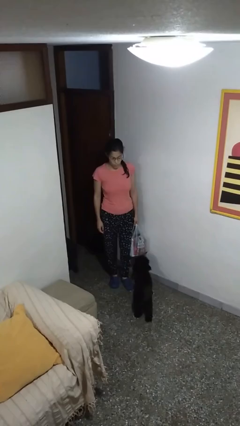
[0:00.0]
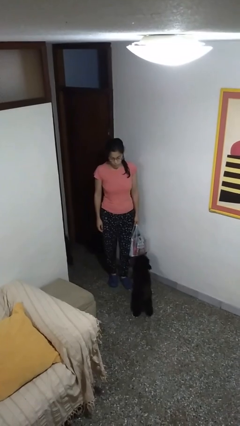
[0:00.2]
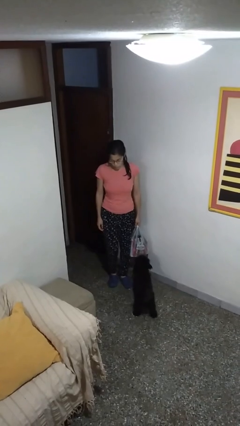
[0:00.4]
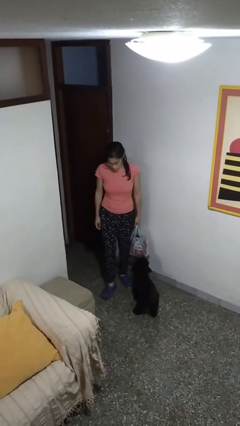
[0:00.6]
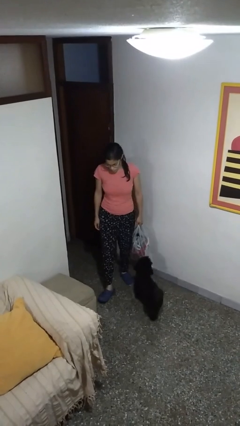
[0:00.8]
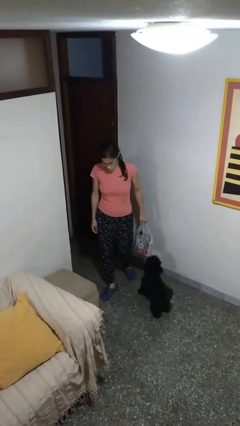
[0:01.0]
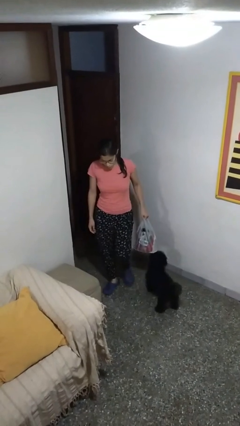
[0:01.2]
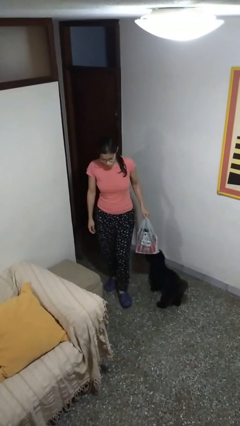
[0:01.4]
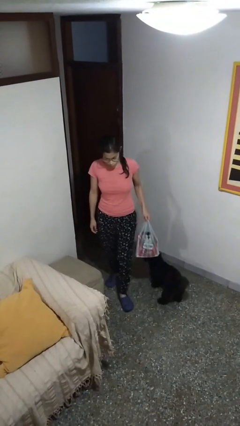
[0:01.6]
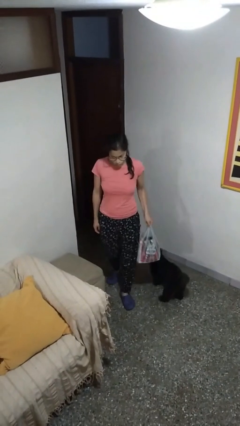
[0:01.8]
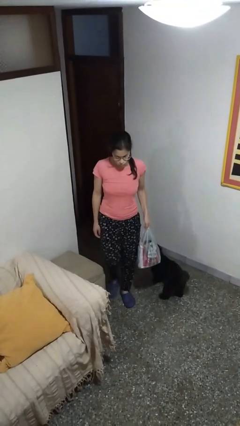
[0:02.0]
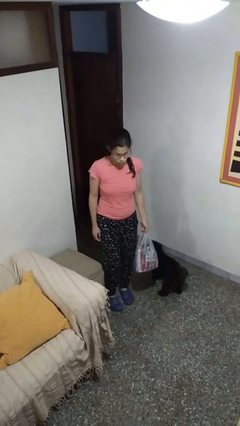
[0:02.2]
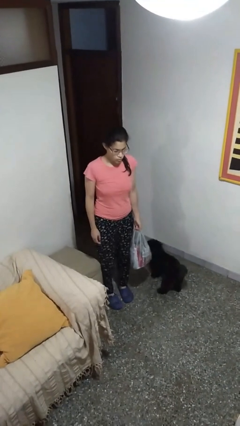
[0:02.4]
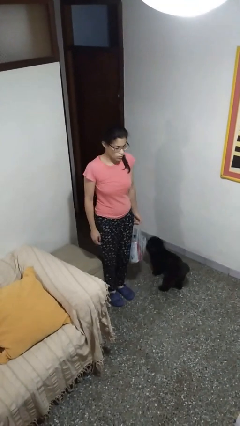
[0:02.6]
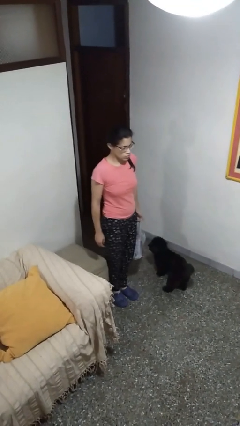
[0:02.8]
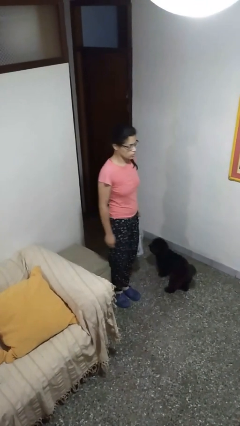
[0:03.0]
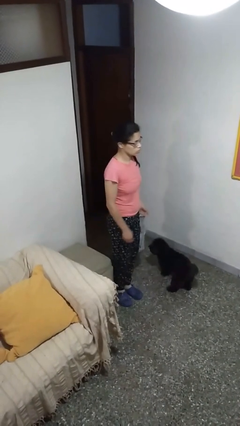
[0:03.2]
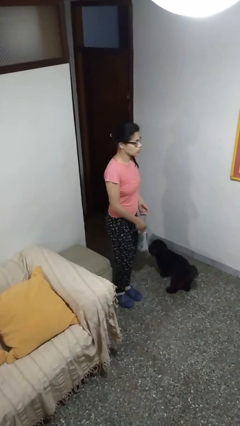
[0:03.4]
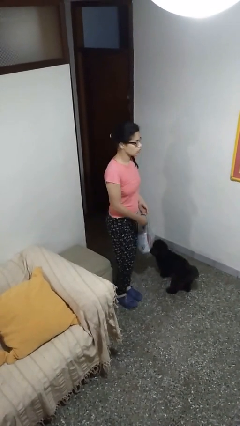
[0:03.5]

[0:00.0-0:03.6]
person carries groceries

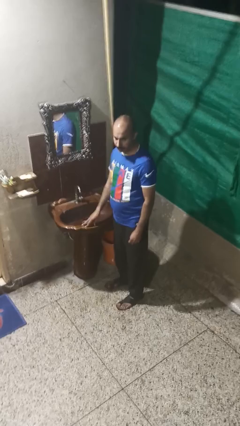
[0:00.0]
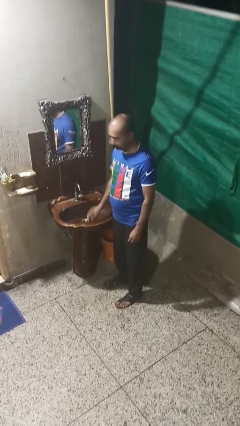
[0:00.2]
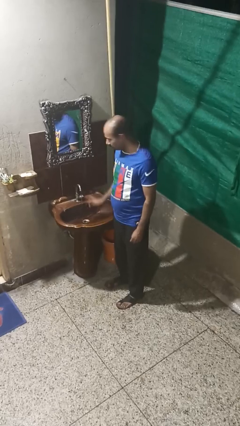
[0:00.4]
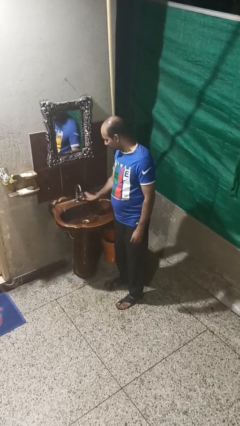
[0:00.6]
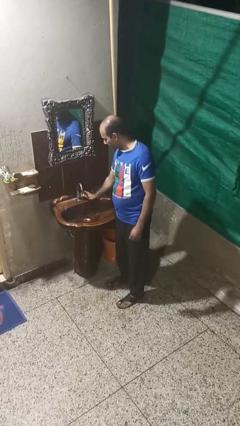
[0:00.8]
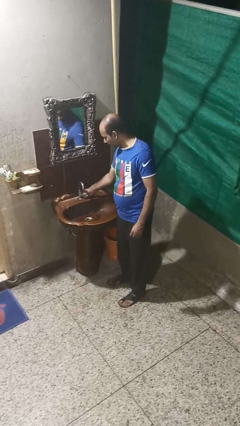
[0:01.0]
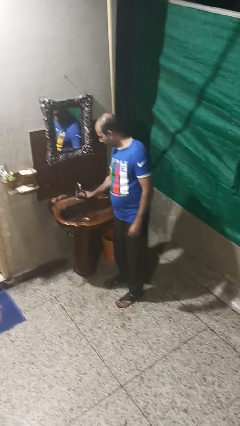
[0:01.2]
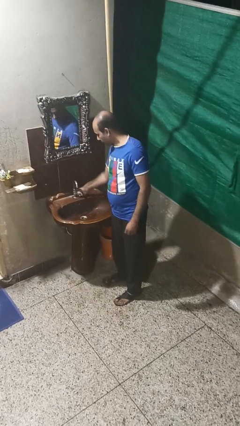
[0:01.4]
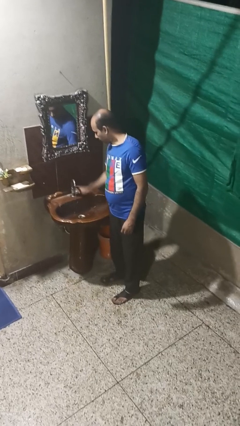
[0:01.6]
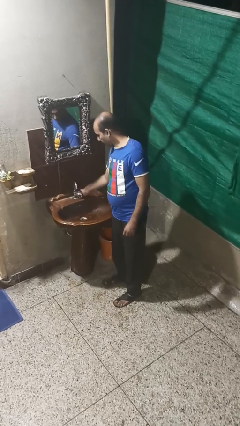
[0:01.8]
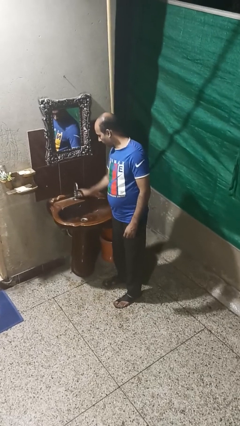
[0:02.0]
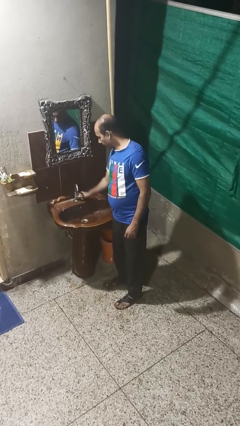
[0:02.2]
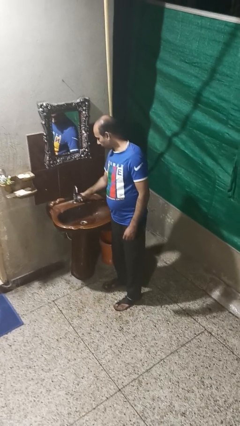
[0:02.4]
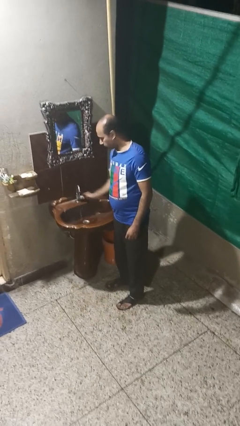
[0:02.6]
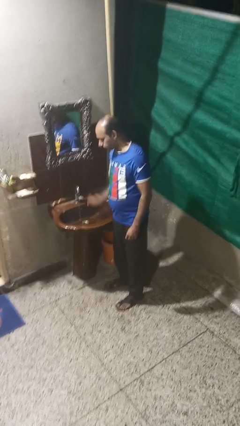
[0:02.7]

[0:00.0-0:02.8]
person turns off faucet

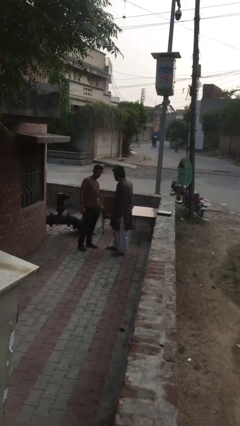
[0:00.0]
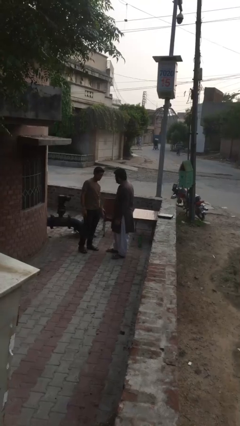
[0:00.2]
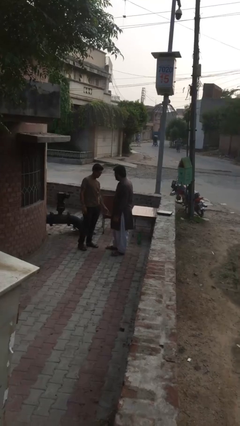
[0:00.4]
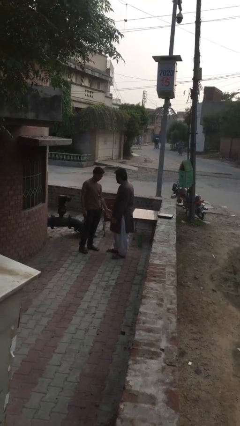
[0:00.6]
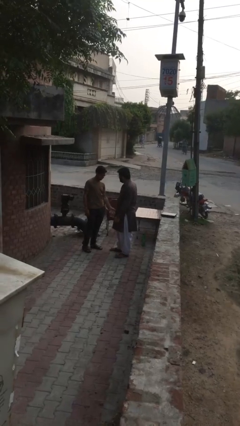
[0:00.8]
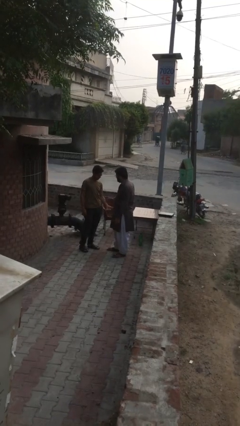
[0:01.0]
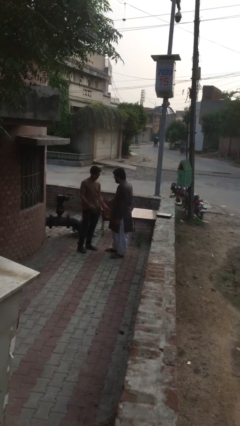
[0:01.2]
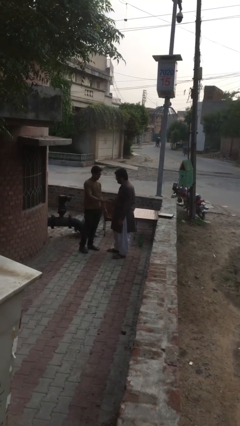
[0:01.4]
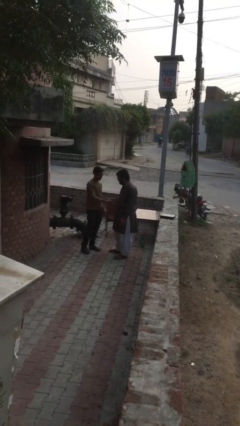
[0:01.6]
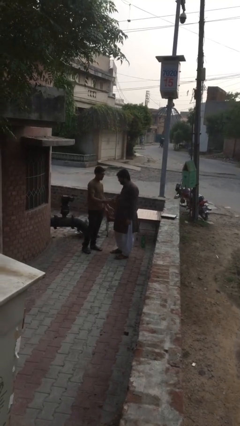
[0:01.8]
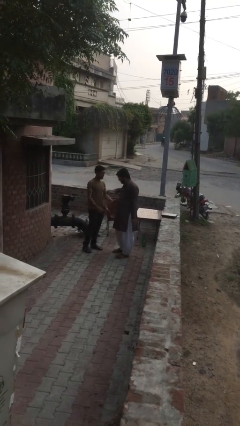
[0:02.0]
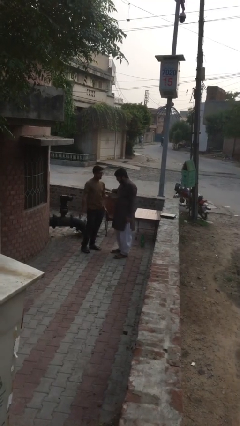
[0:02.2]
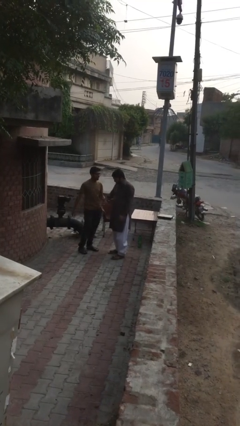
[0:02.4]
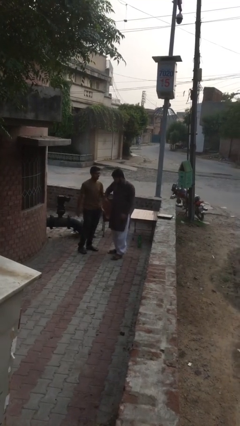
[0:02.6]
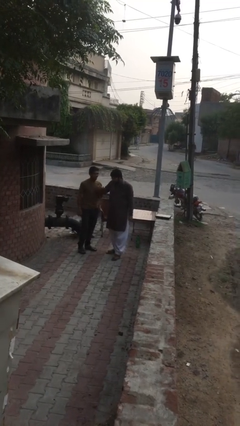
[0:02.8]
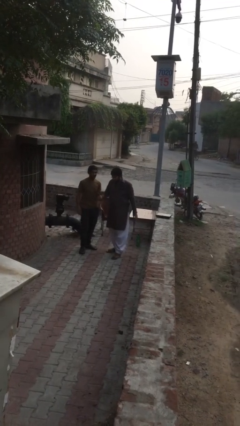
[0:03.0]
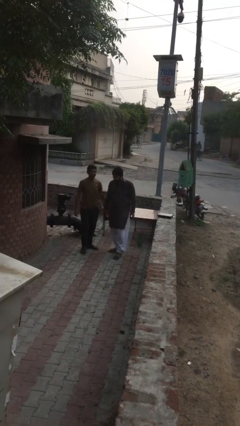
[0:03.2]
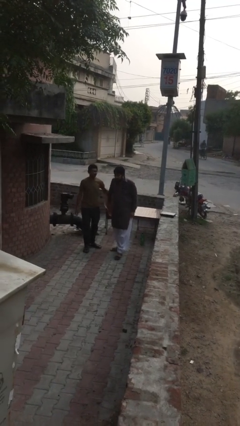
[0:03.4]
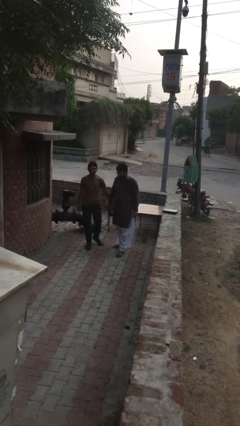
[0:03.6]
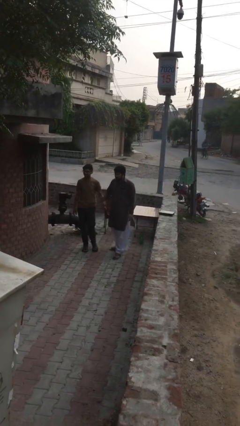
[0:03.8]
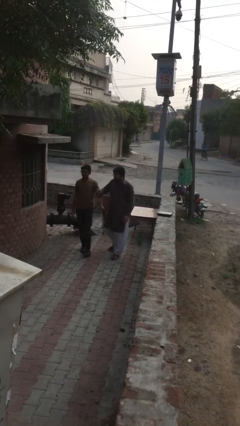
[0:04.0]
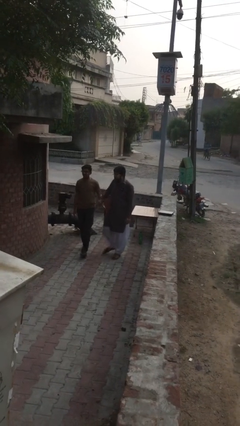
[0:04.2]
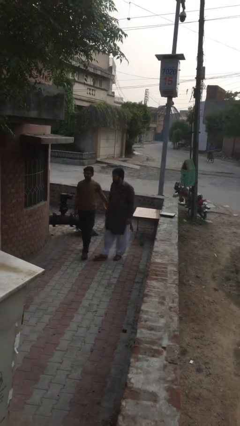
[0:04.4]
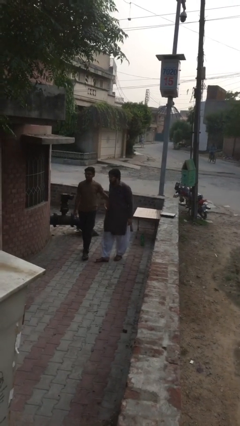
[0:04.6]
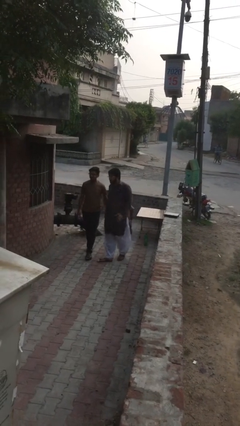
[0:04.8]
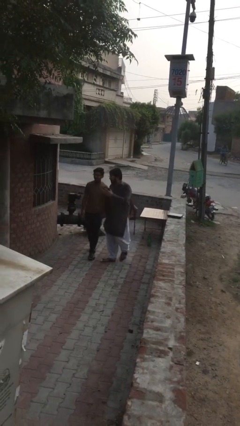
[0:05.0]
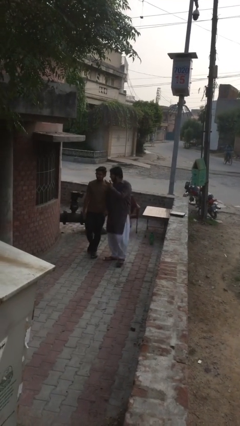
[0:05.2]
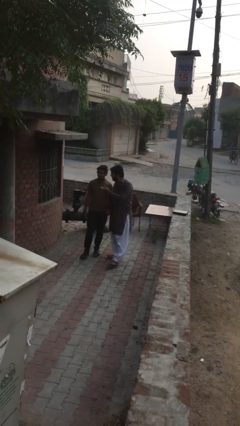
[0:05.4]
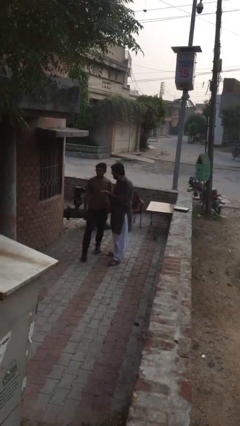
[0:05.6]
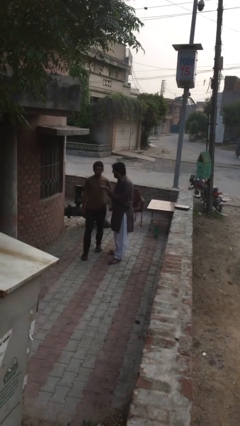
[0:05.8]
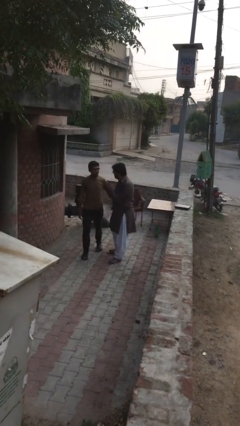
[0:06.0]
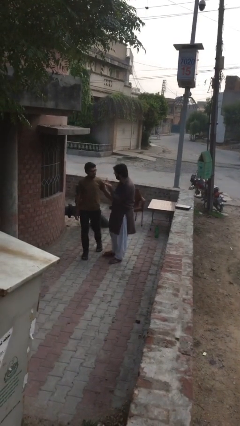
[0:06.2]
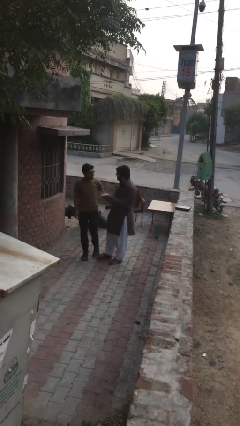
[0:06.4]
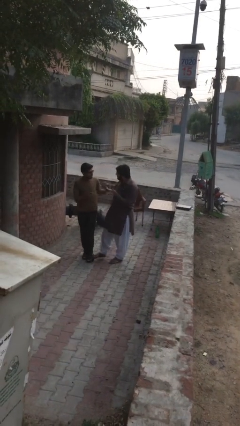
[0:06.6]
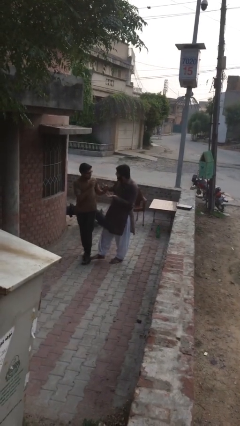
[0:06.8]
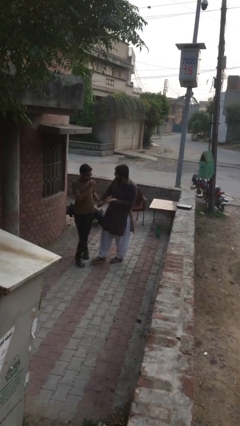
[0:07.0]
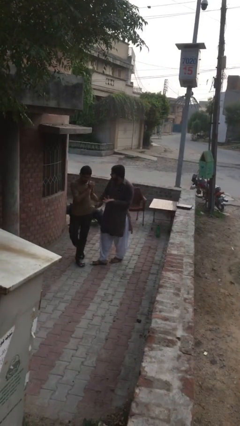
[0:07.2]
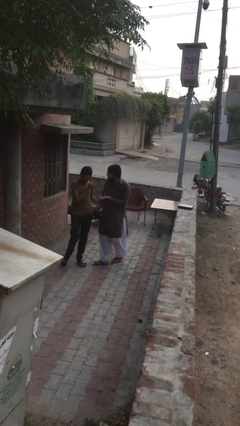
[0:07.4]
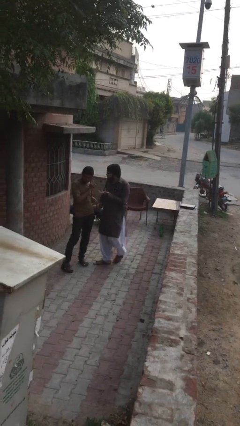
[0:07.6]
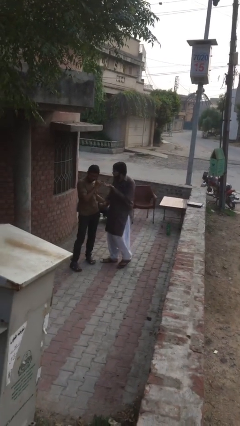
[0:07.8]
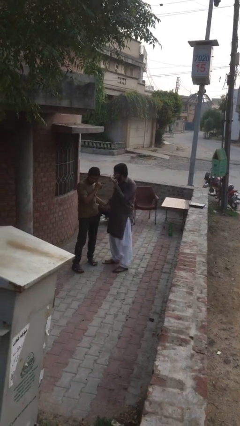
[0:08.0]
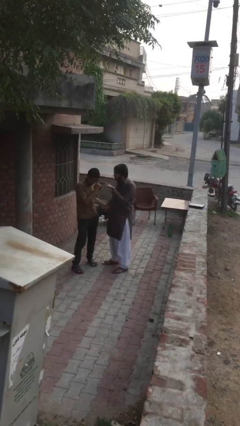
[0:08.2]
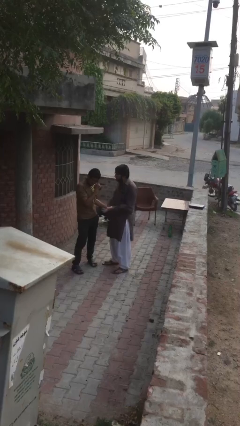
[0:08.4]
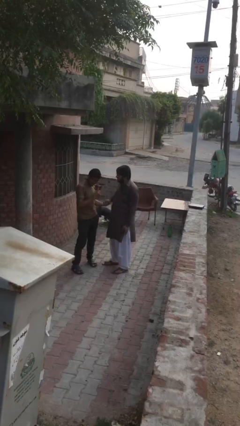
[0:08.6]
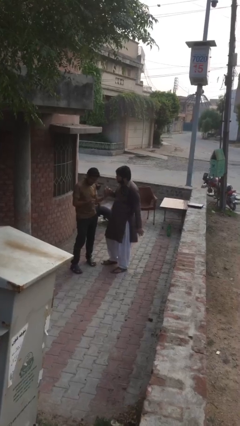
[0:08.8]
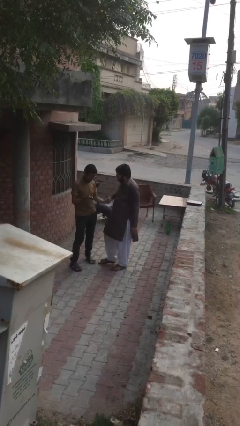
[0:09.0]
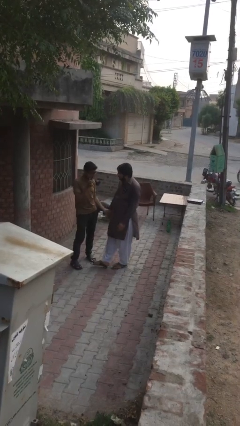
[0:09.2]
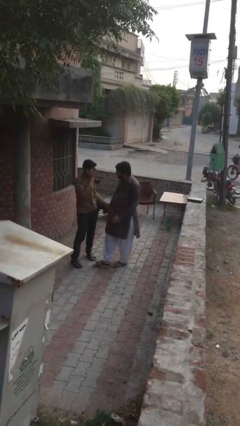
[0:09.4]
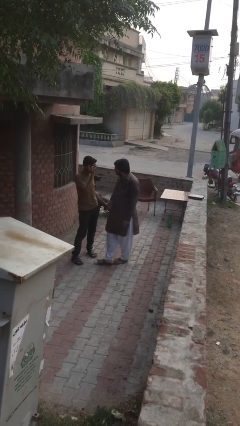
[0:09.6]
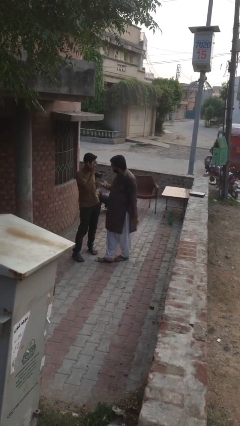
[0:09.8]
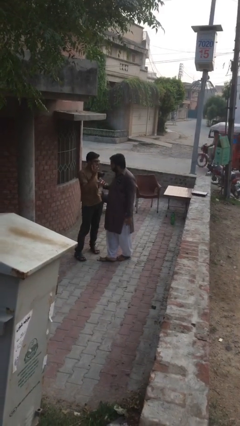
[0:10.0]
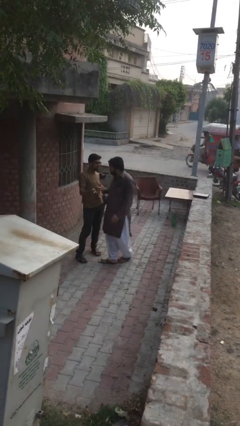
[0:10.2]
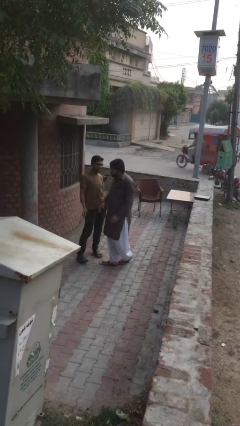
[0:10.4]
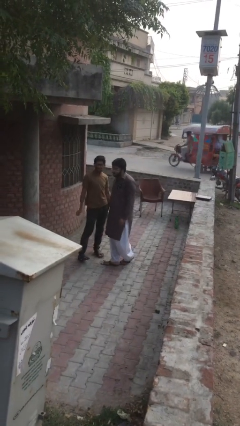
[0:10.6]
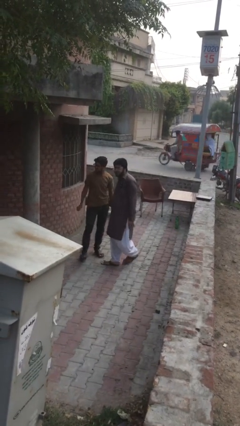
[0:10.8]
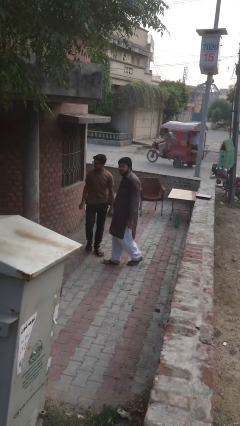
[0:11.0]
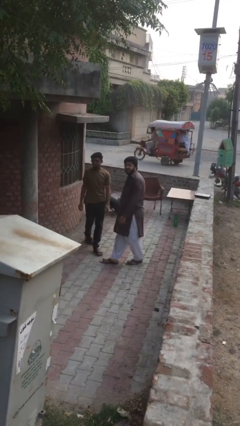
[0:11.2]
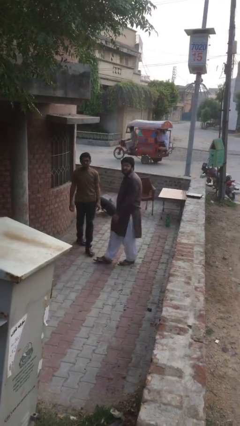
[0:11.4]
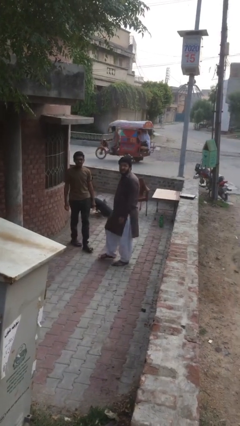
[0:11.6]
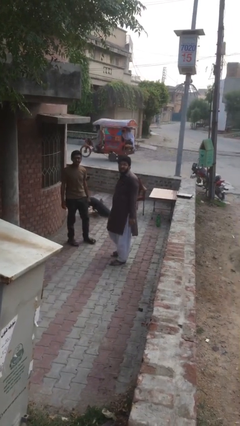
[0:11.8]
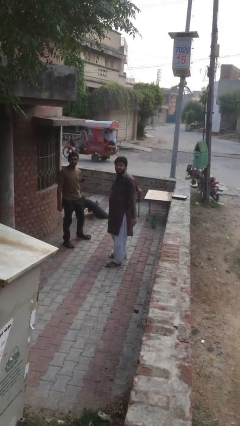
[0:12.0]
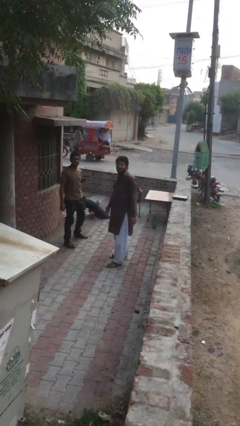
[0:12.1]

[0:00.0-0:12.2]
person holds hand
